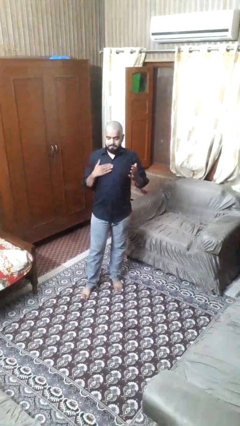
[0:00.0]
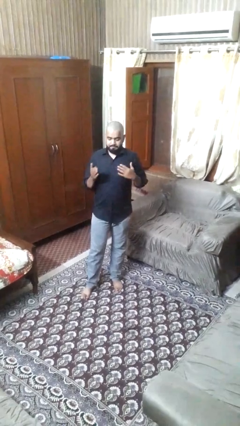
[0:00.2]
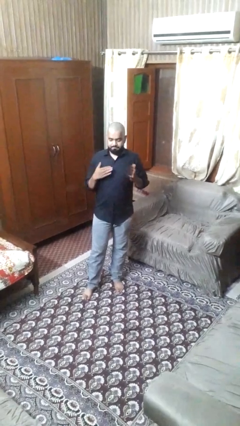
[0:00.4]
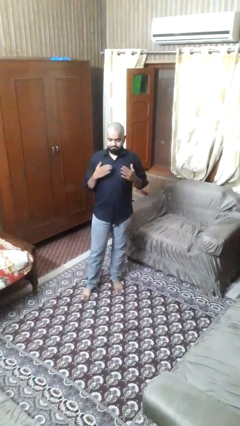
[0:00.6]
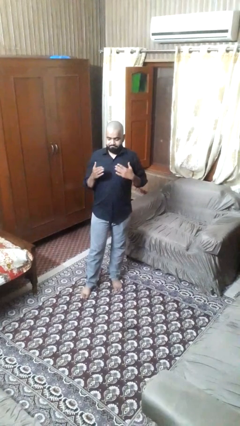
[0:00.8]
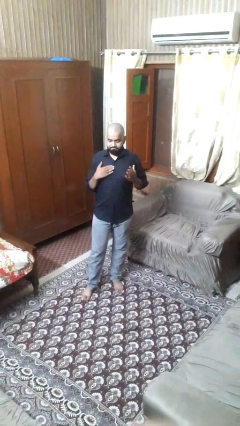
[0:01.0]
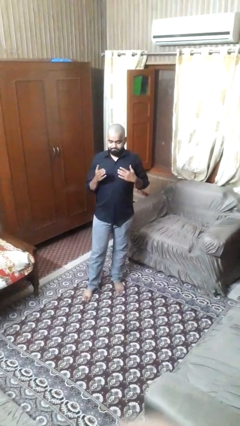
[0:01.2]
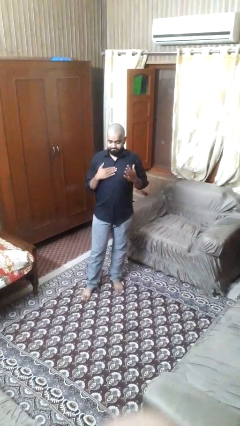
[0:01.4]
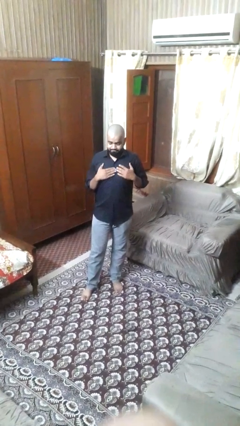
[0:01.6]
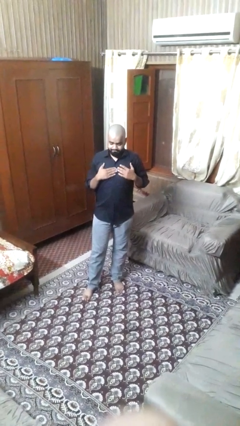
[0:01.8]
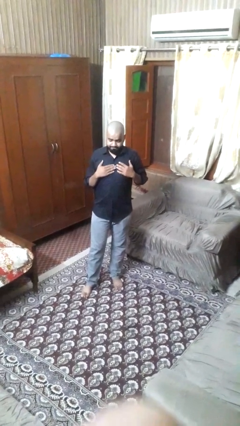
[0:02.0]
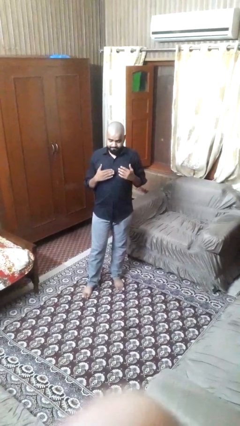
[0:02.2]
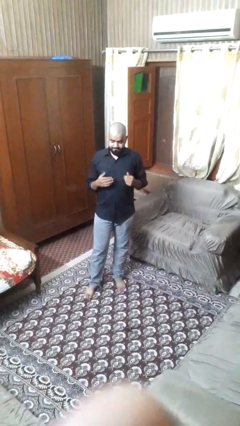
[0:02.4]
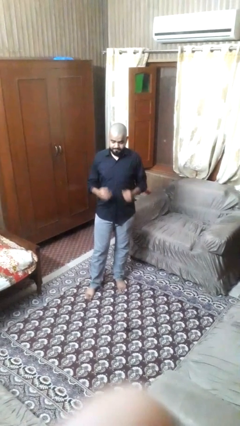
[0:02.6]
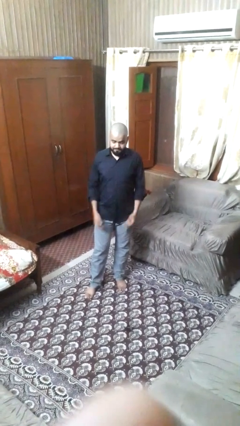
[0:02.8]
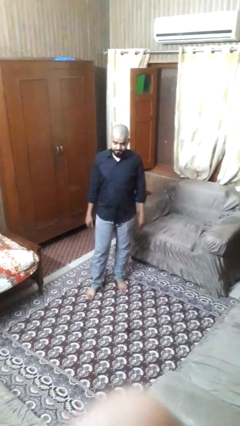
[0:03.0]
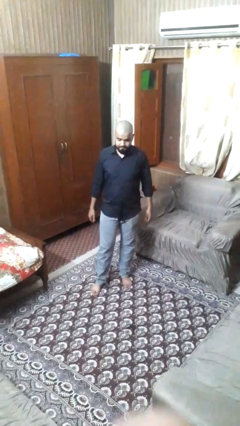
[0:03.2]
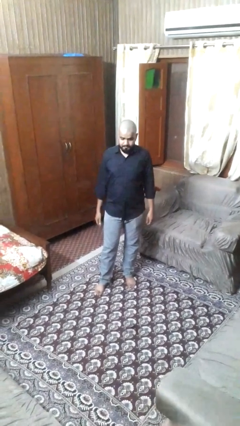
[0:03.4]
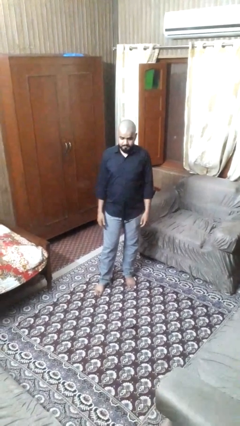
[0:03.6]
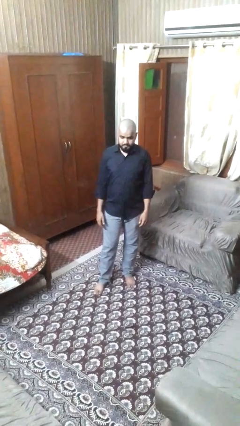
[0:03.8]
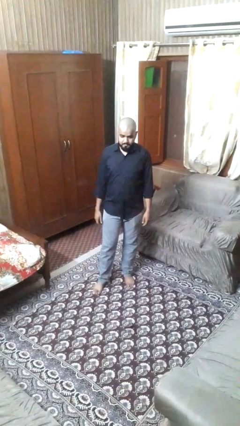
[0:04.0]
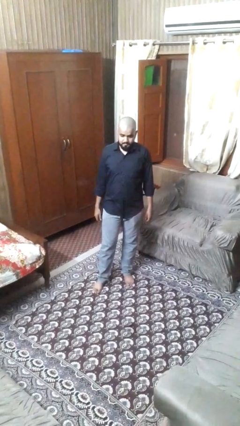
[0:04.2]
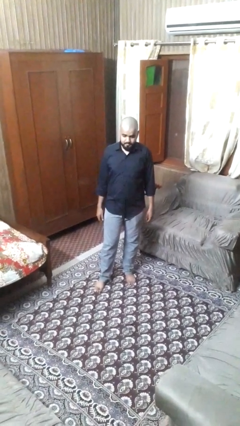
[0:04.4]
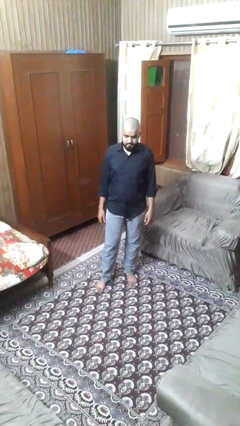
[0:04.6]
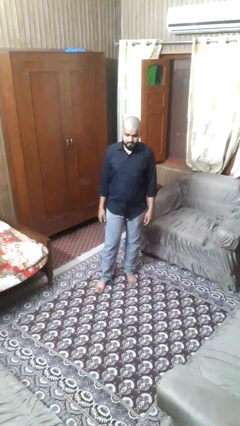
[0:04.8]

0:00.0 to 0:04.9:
person drums on chest

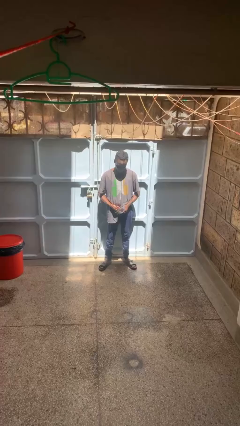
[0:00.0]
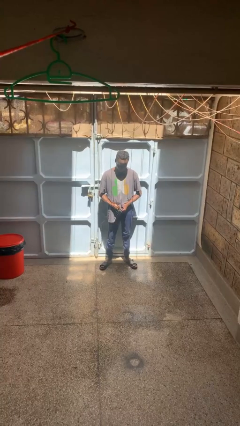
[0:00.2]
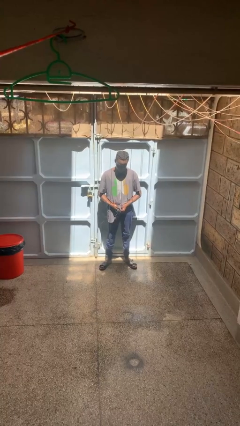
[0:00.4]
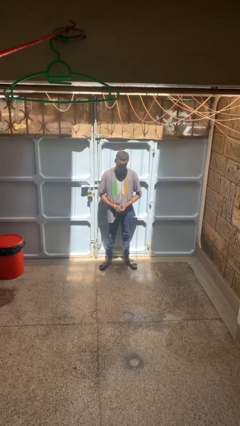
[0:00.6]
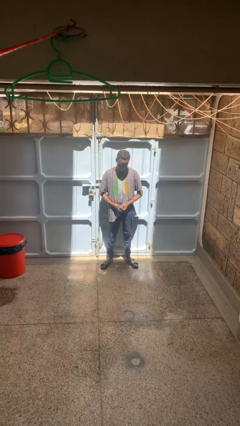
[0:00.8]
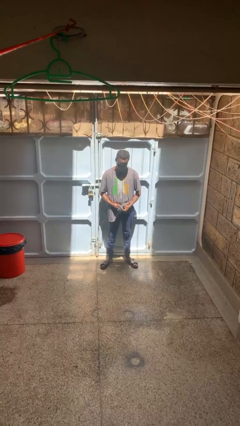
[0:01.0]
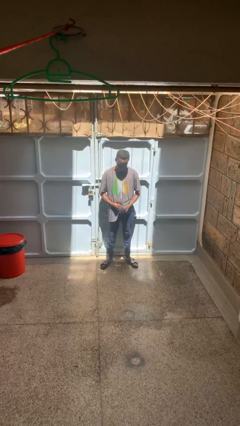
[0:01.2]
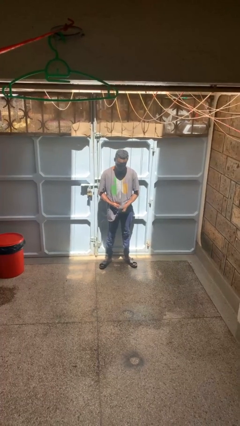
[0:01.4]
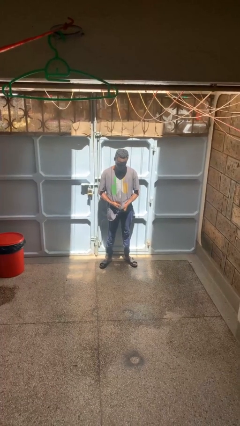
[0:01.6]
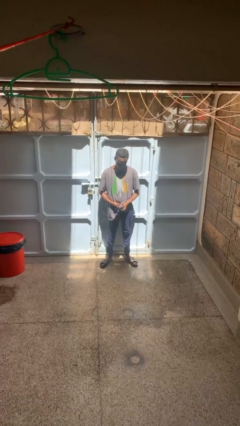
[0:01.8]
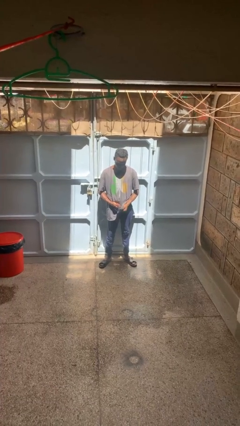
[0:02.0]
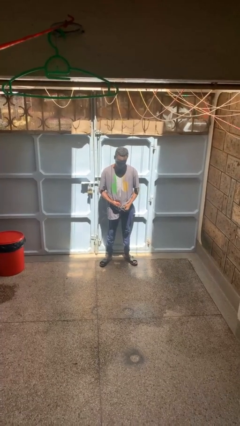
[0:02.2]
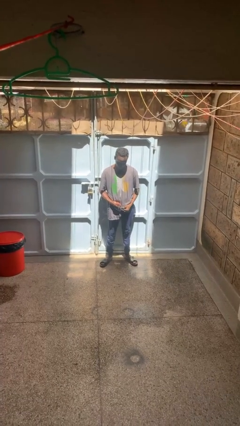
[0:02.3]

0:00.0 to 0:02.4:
person cleans eyeglasses

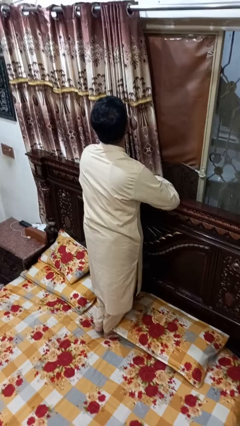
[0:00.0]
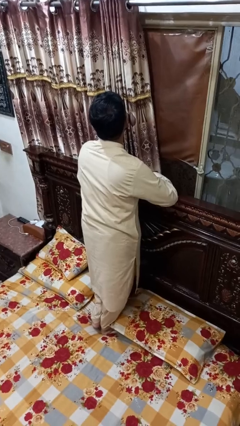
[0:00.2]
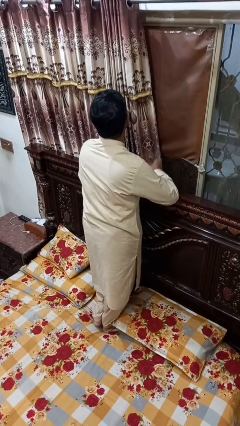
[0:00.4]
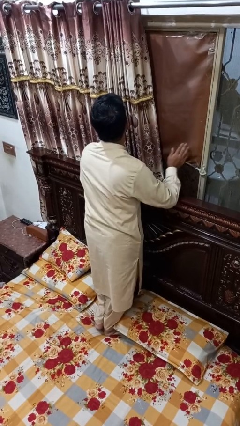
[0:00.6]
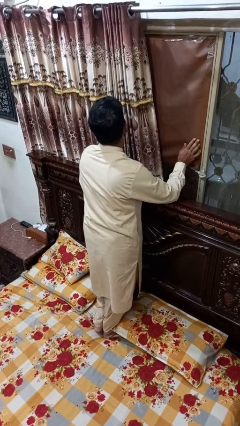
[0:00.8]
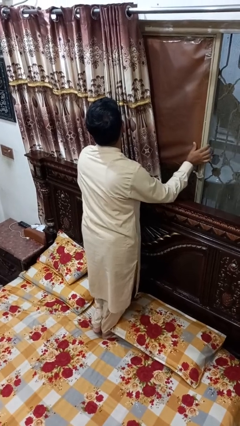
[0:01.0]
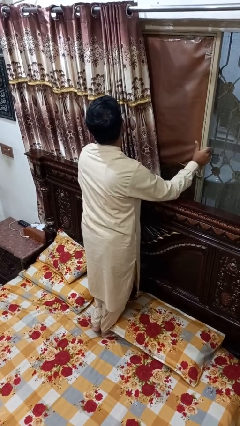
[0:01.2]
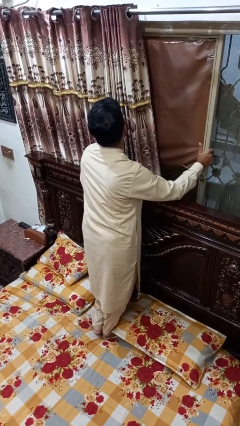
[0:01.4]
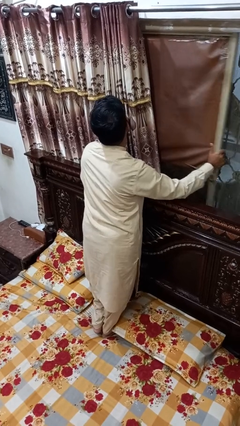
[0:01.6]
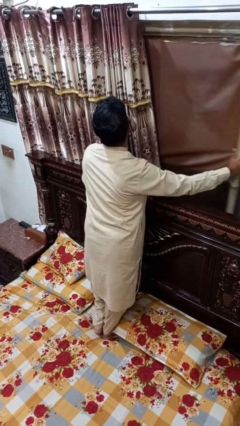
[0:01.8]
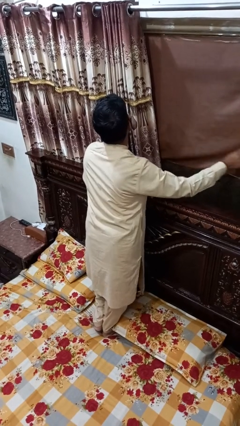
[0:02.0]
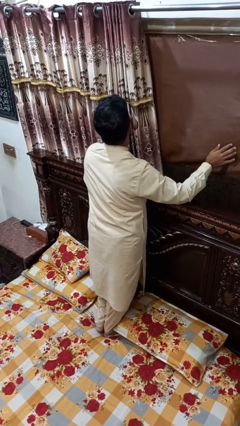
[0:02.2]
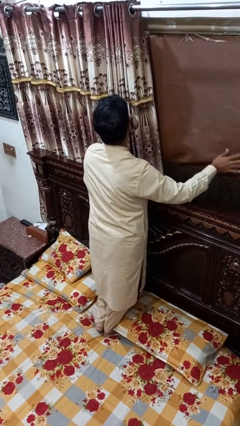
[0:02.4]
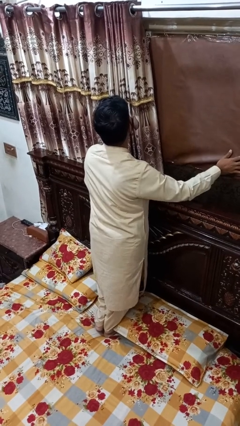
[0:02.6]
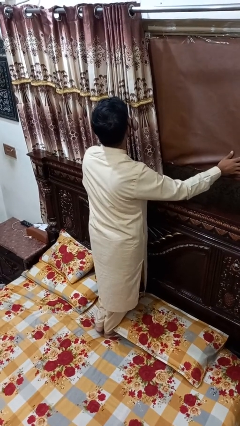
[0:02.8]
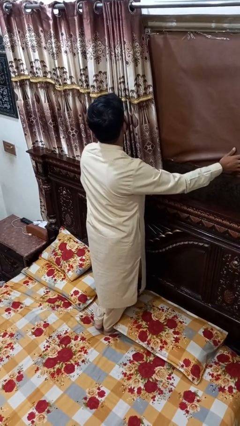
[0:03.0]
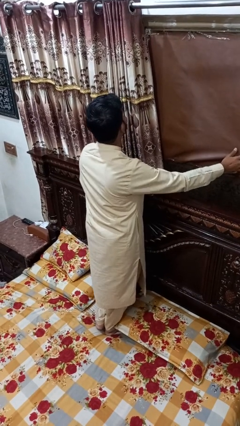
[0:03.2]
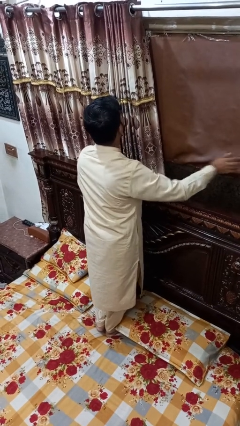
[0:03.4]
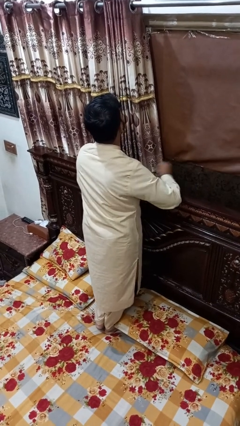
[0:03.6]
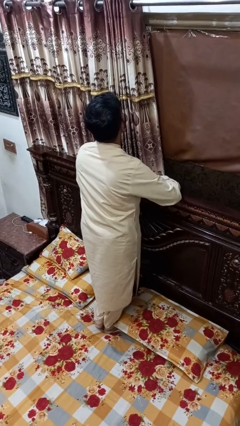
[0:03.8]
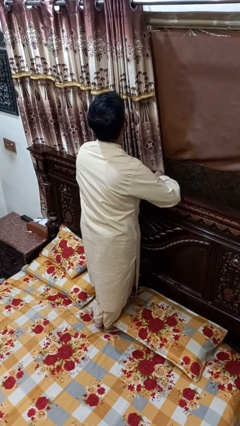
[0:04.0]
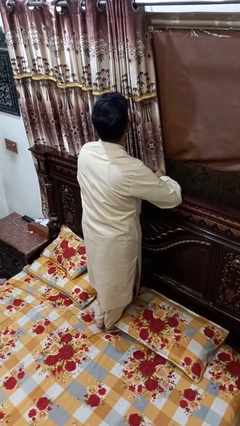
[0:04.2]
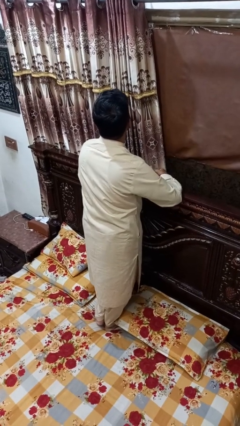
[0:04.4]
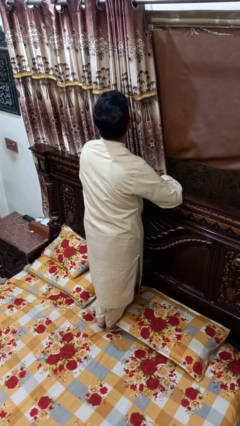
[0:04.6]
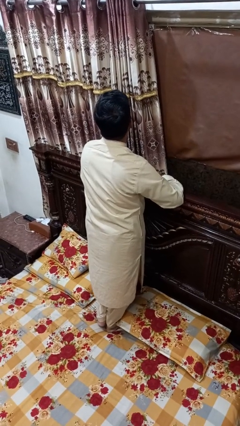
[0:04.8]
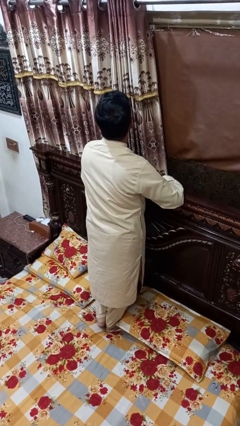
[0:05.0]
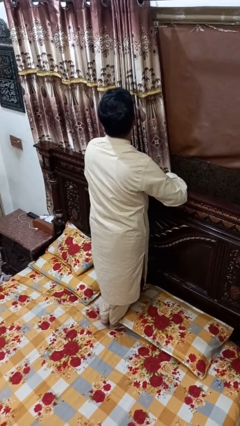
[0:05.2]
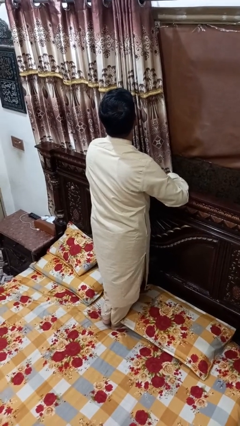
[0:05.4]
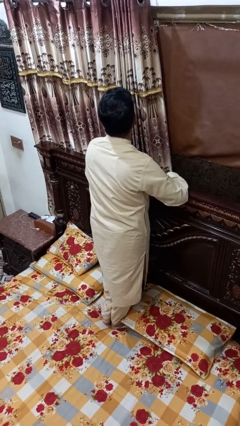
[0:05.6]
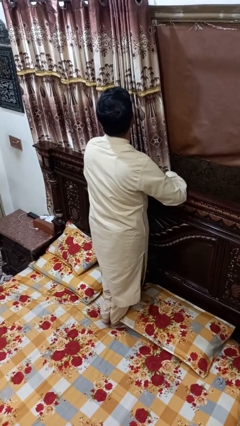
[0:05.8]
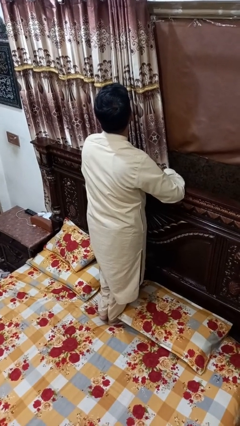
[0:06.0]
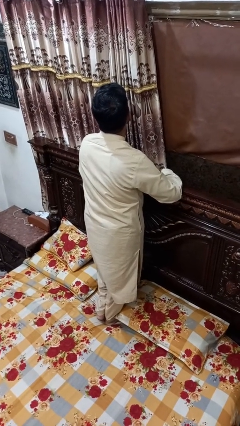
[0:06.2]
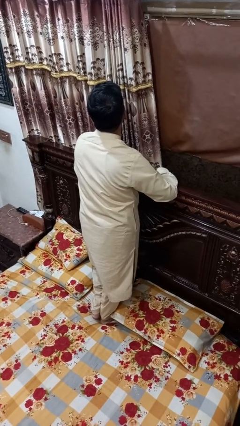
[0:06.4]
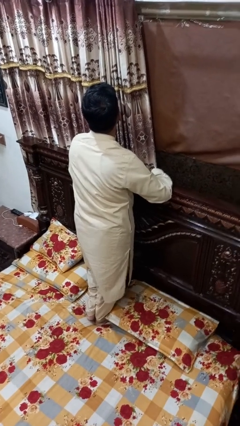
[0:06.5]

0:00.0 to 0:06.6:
person closes home window

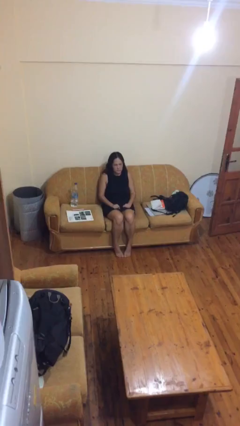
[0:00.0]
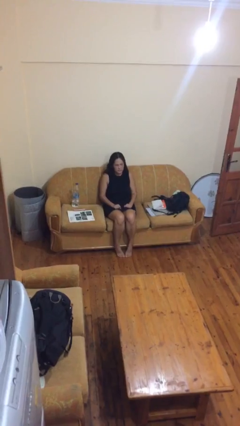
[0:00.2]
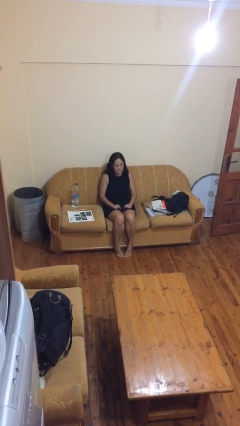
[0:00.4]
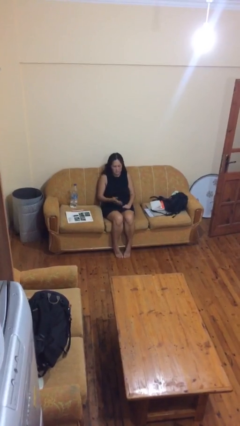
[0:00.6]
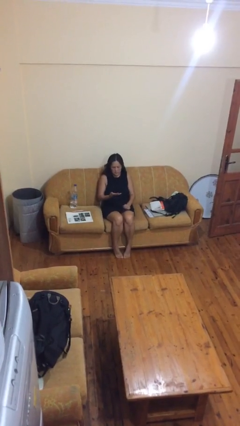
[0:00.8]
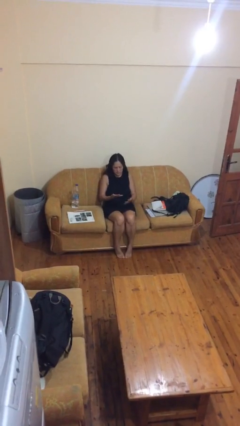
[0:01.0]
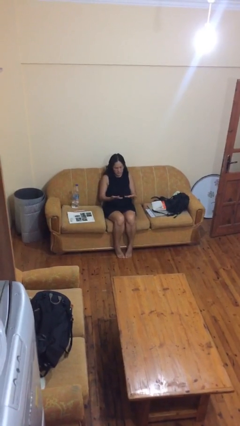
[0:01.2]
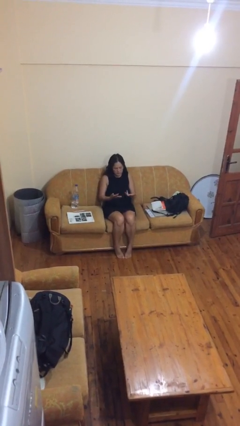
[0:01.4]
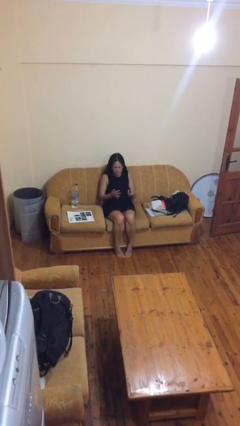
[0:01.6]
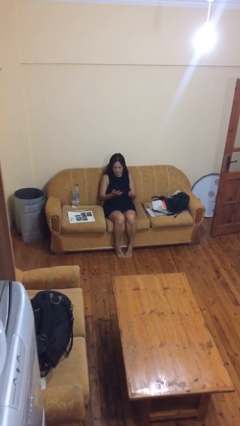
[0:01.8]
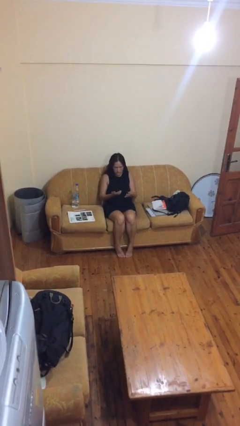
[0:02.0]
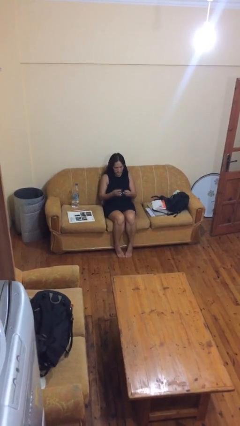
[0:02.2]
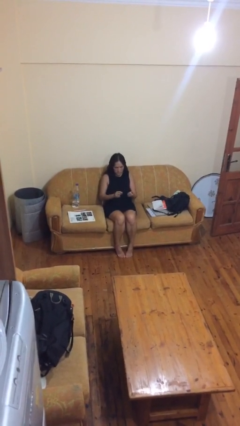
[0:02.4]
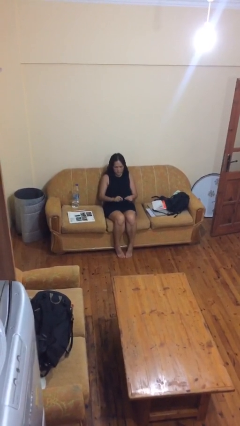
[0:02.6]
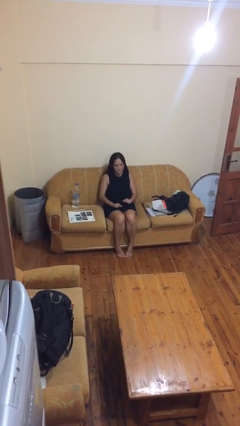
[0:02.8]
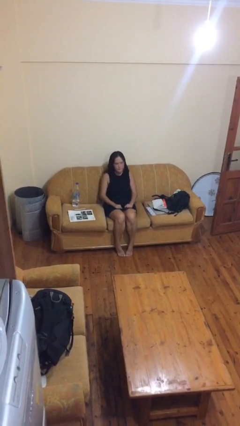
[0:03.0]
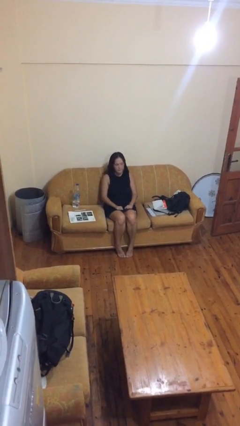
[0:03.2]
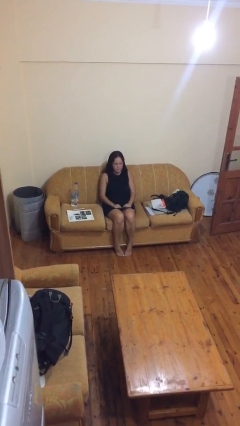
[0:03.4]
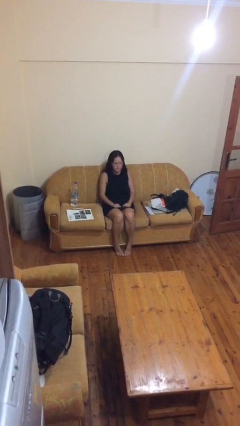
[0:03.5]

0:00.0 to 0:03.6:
person looks at hands in lap

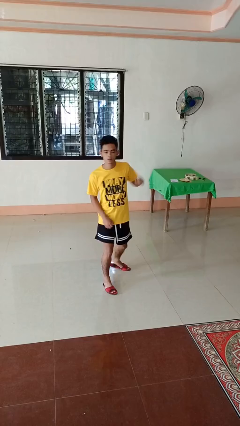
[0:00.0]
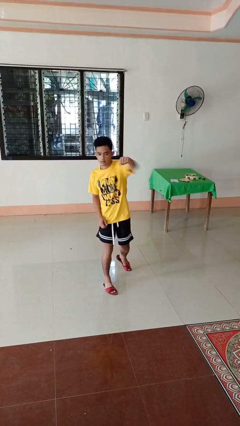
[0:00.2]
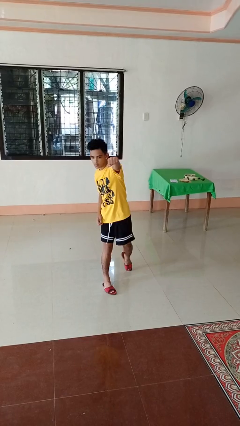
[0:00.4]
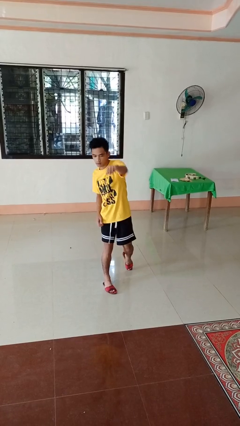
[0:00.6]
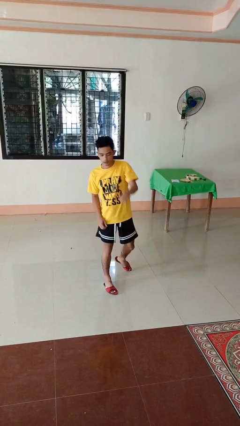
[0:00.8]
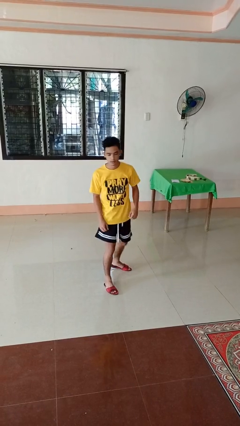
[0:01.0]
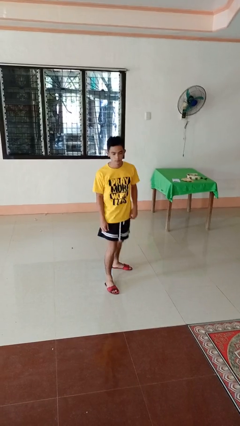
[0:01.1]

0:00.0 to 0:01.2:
person punches
